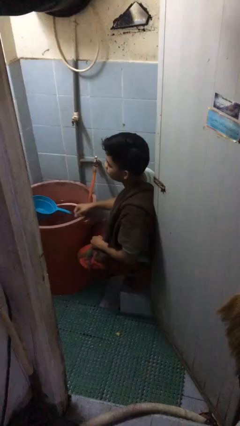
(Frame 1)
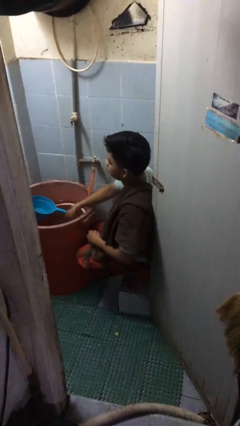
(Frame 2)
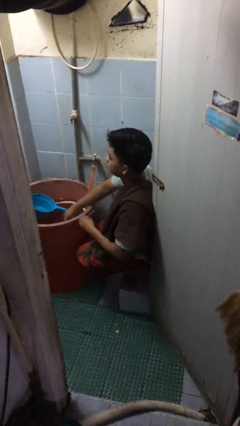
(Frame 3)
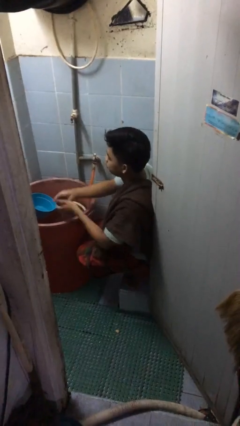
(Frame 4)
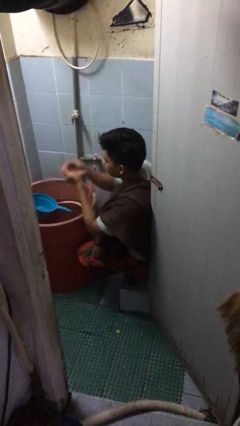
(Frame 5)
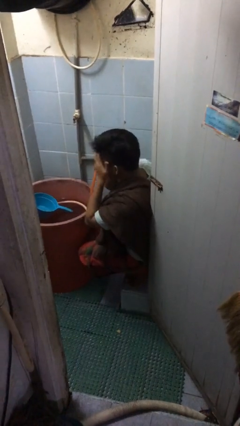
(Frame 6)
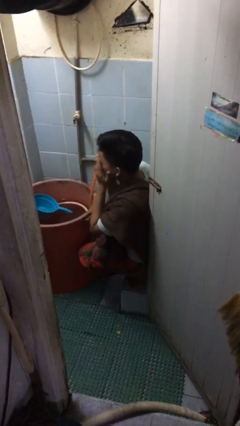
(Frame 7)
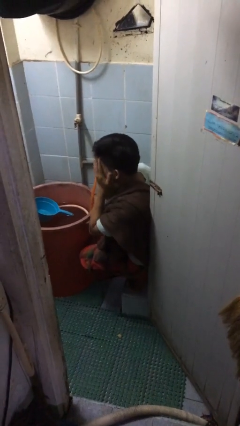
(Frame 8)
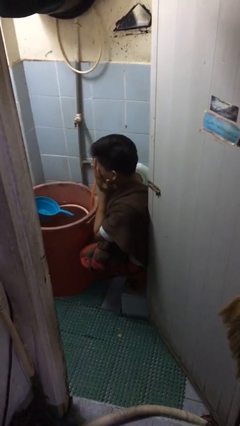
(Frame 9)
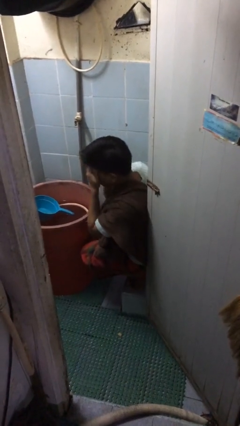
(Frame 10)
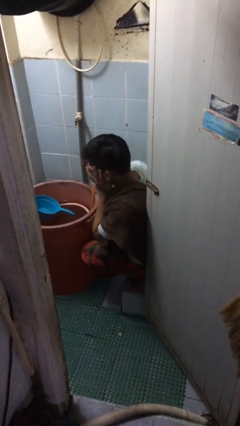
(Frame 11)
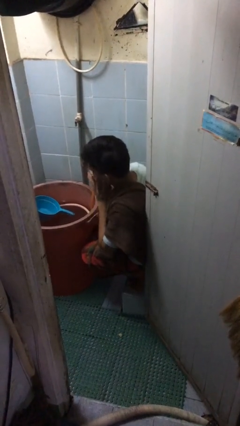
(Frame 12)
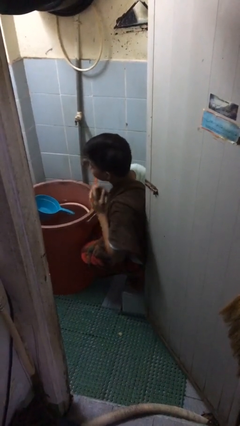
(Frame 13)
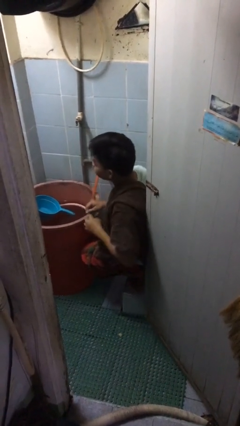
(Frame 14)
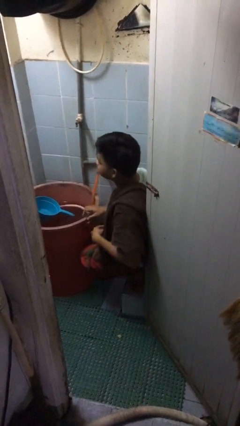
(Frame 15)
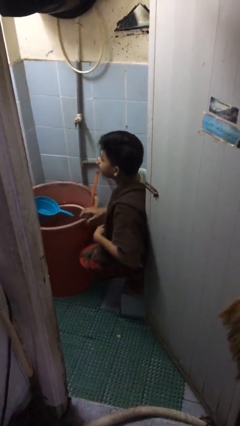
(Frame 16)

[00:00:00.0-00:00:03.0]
person washes face

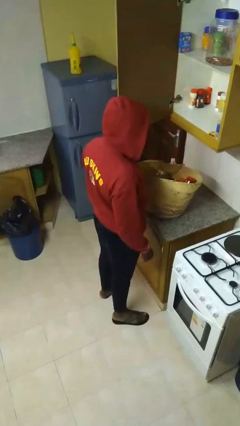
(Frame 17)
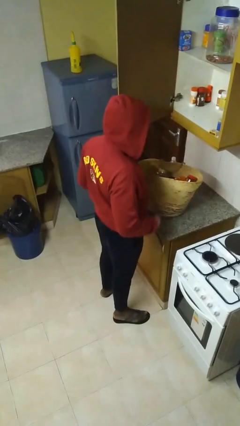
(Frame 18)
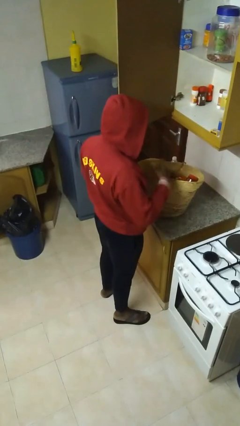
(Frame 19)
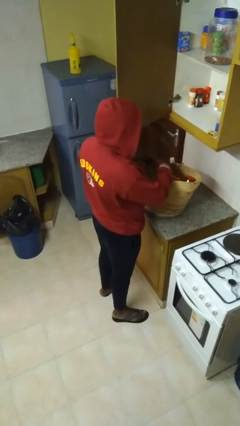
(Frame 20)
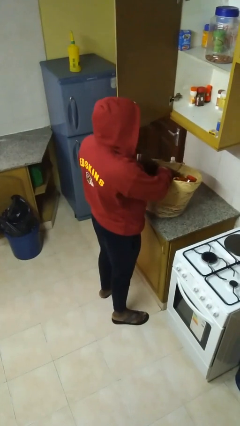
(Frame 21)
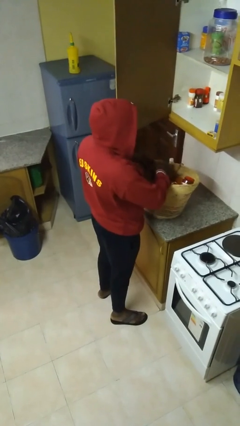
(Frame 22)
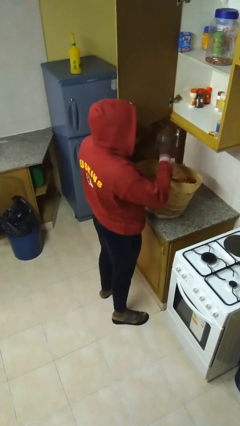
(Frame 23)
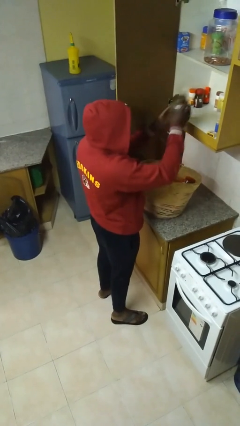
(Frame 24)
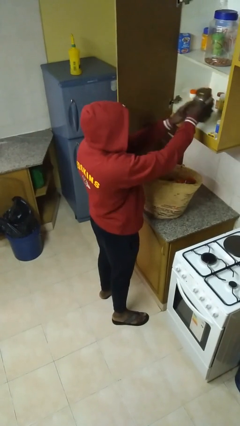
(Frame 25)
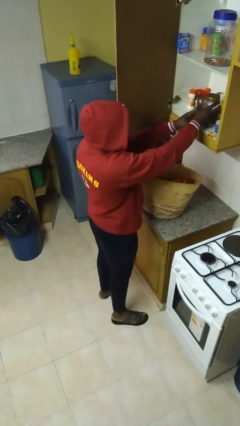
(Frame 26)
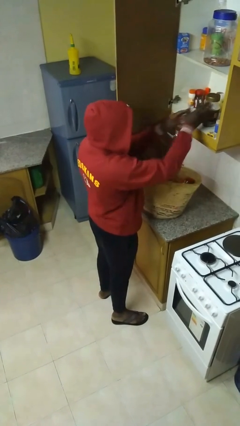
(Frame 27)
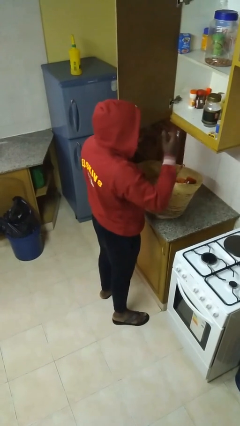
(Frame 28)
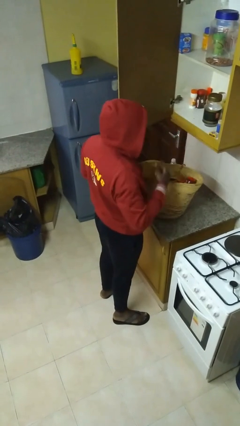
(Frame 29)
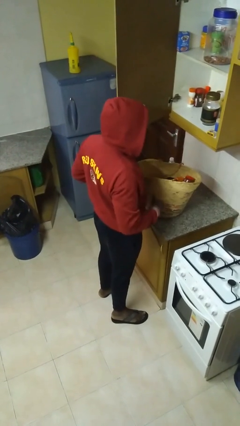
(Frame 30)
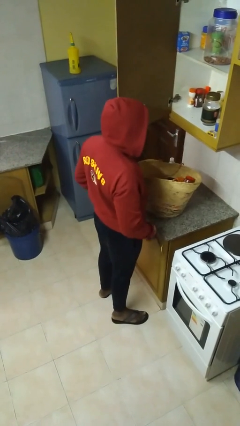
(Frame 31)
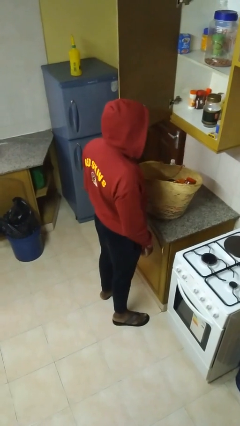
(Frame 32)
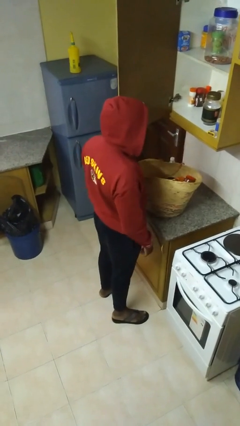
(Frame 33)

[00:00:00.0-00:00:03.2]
person loads groceries into cabinet

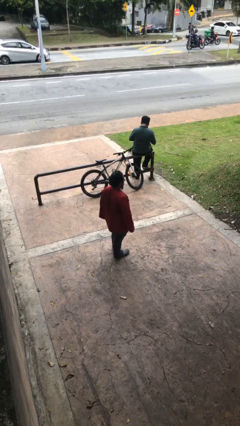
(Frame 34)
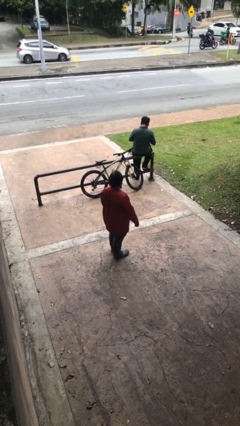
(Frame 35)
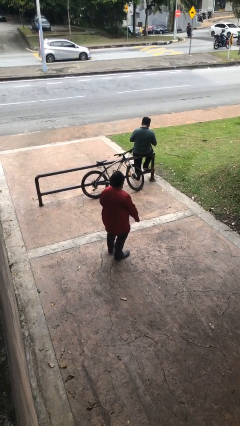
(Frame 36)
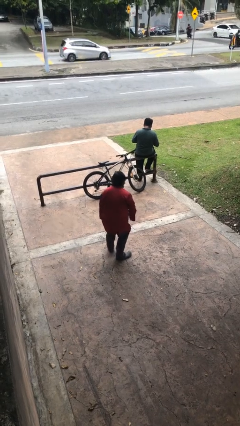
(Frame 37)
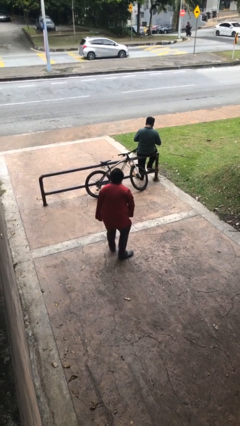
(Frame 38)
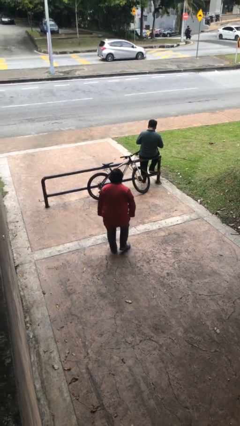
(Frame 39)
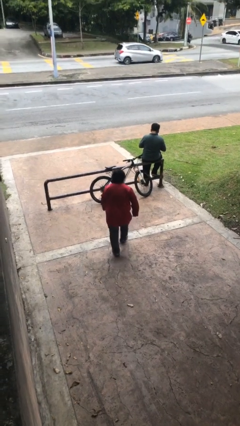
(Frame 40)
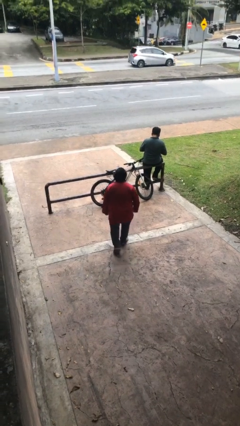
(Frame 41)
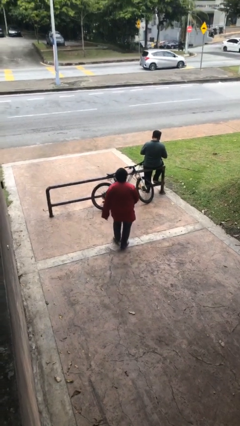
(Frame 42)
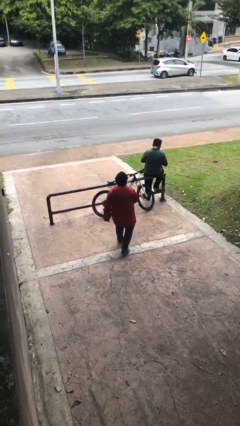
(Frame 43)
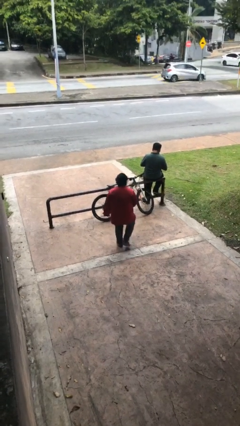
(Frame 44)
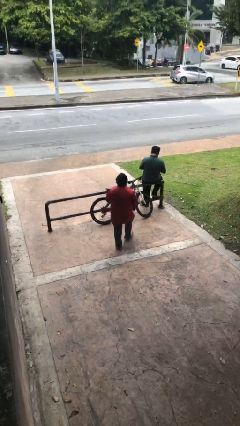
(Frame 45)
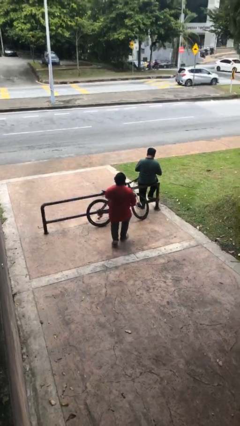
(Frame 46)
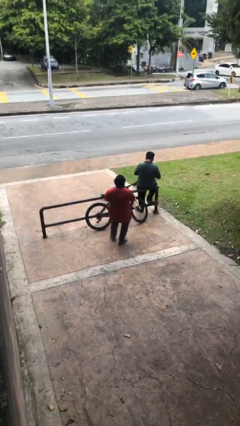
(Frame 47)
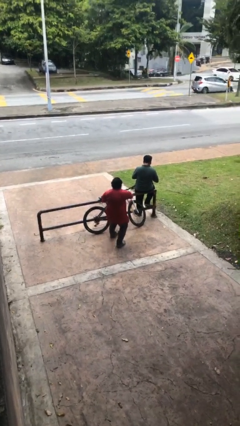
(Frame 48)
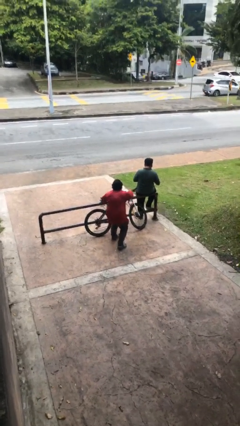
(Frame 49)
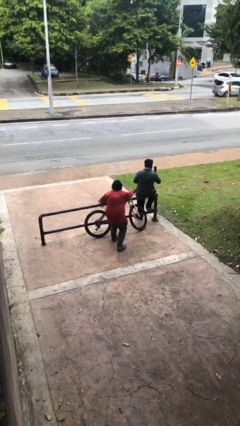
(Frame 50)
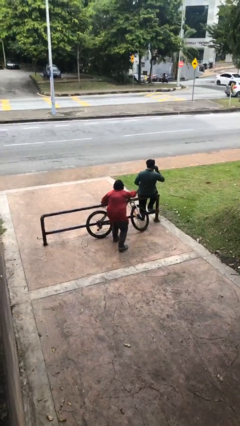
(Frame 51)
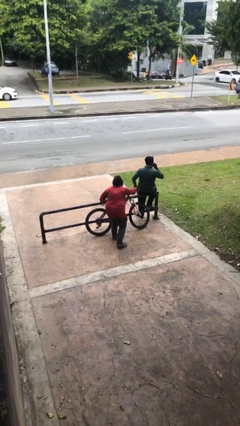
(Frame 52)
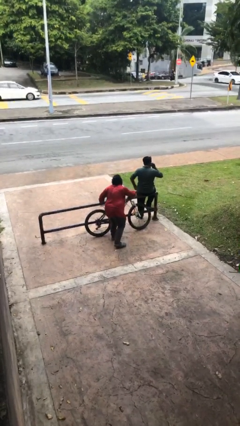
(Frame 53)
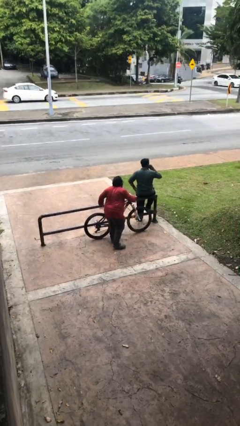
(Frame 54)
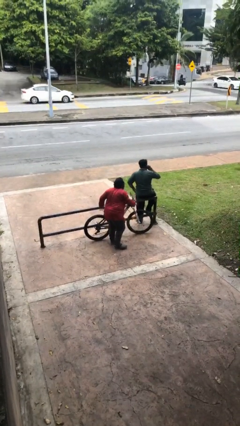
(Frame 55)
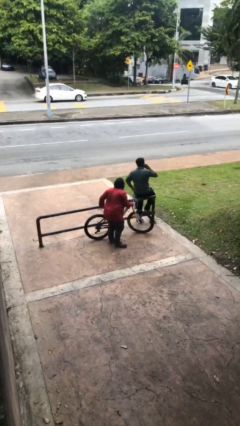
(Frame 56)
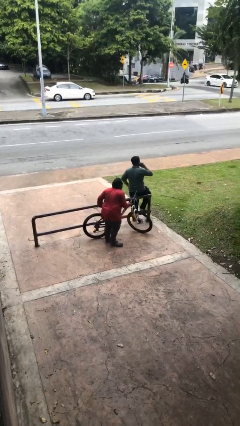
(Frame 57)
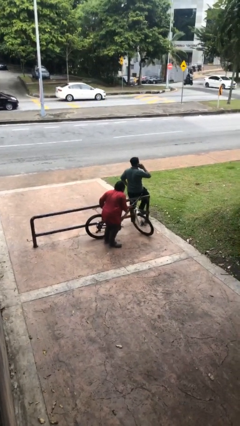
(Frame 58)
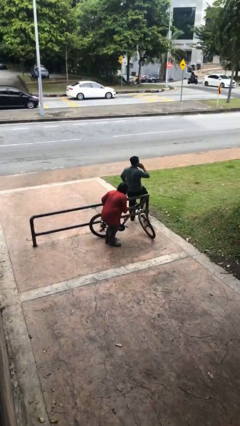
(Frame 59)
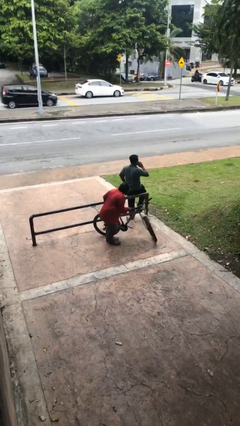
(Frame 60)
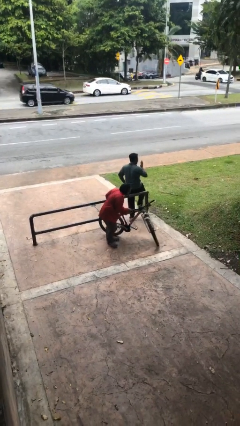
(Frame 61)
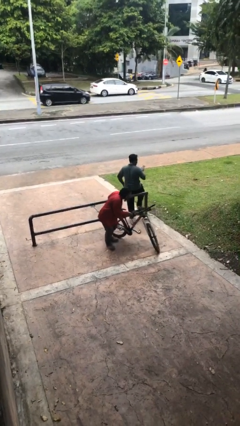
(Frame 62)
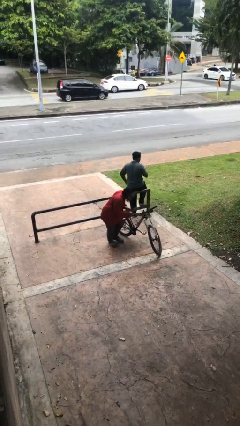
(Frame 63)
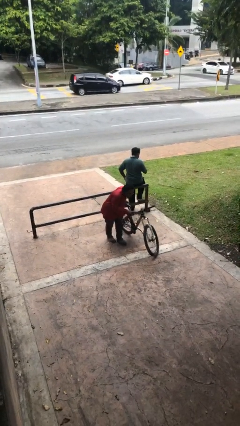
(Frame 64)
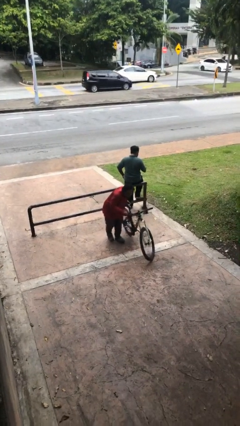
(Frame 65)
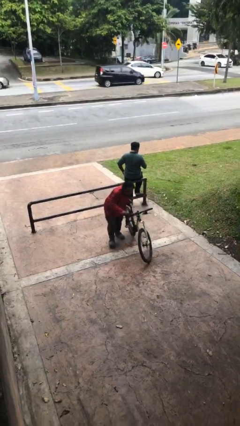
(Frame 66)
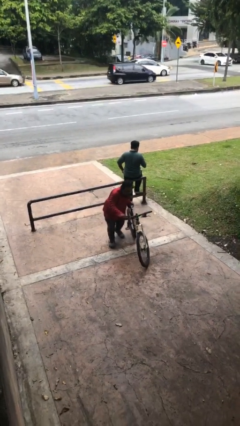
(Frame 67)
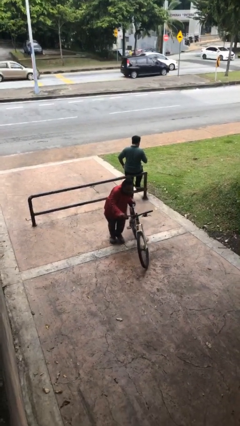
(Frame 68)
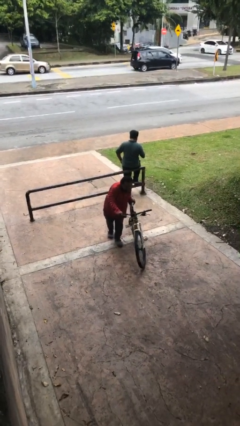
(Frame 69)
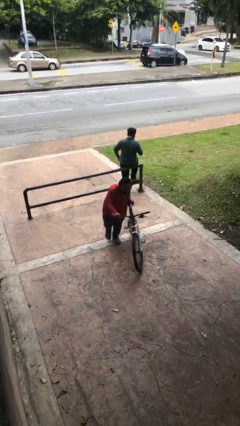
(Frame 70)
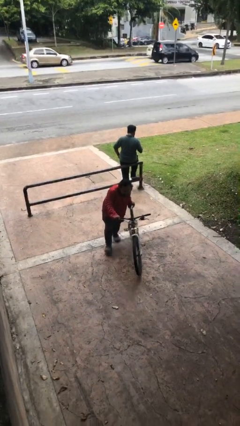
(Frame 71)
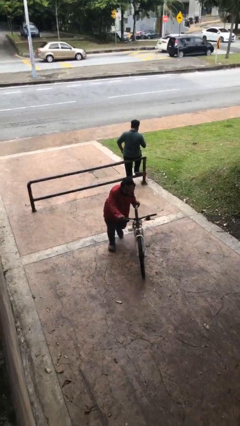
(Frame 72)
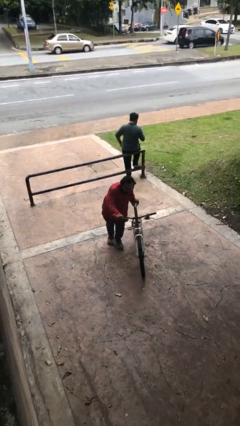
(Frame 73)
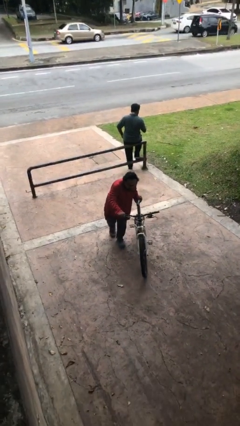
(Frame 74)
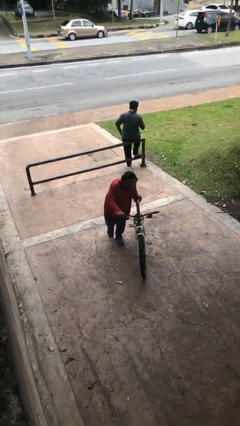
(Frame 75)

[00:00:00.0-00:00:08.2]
person steals object from person

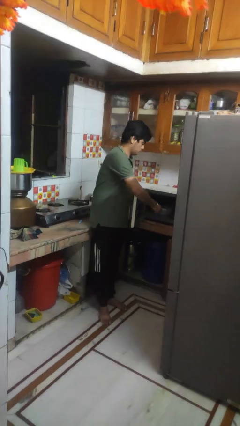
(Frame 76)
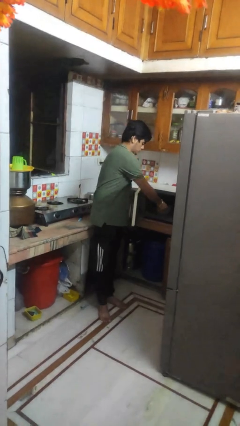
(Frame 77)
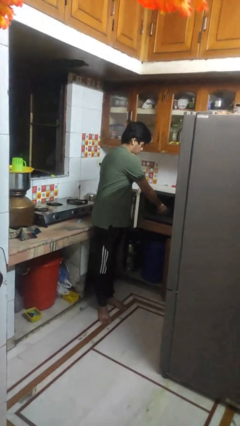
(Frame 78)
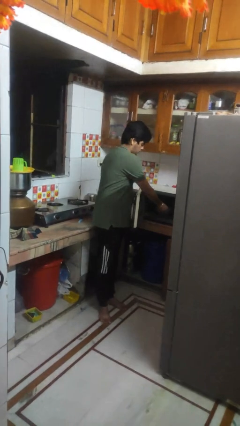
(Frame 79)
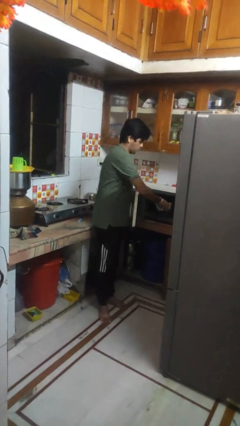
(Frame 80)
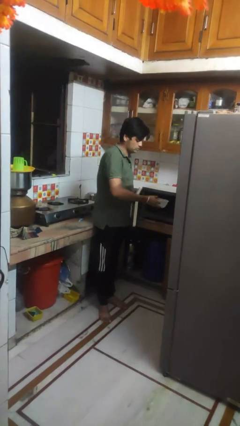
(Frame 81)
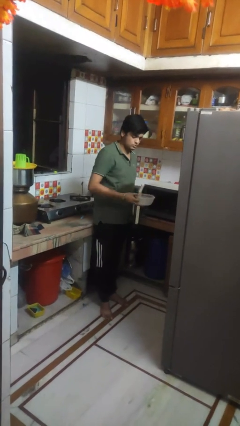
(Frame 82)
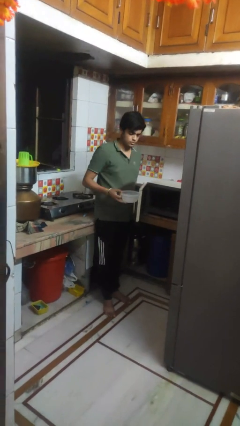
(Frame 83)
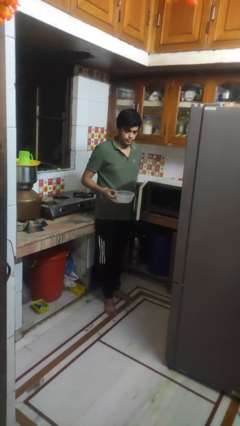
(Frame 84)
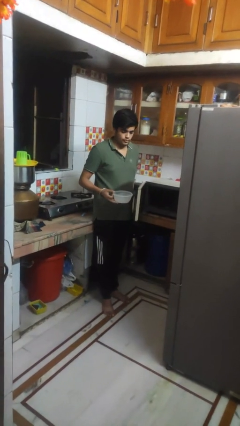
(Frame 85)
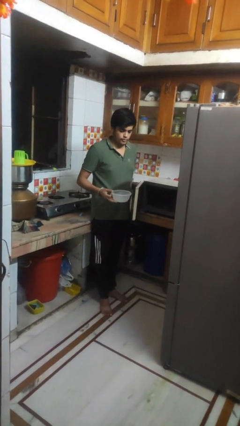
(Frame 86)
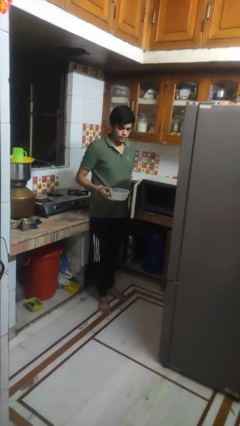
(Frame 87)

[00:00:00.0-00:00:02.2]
person takes object from microwave

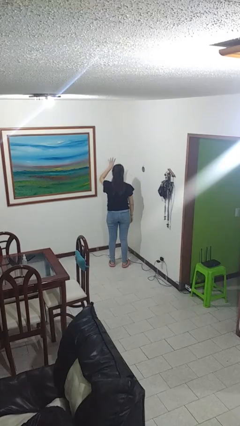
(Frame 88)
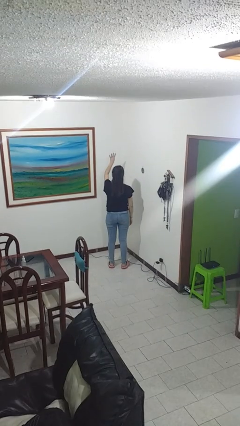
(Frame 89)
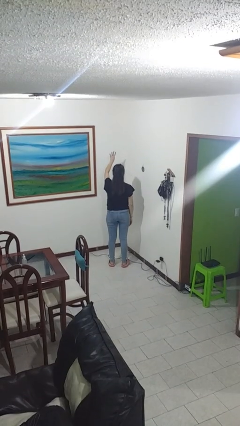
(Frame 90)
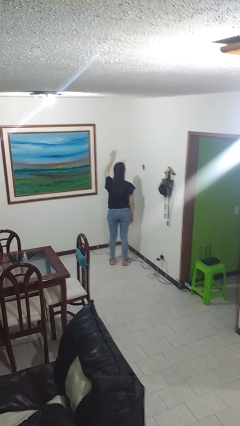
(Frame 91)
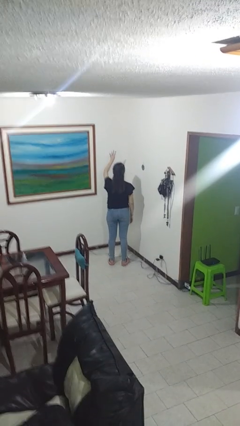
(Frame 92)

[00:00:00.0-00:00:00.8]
person gestures number four

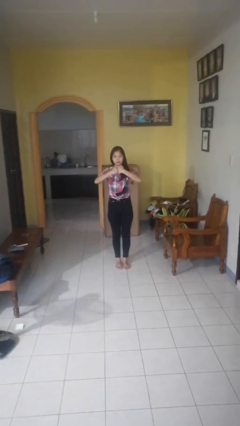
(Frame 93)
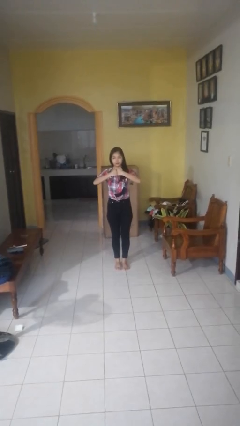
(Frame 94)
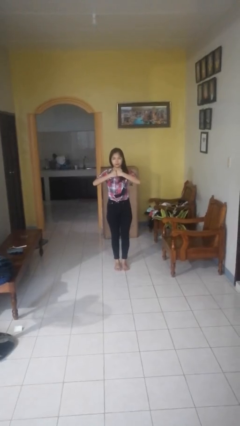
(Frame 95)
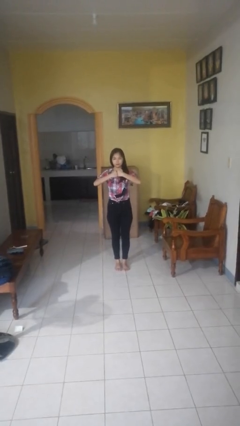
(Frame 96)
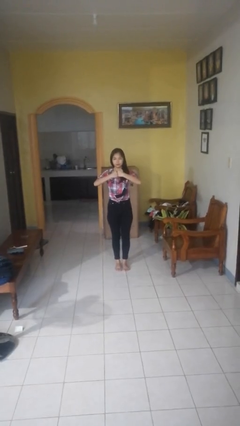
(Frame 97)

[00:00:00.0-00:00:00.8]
person gestures zoom out
